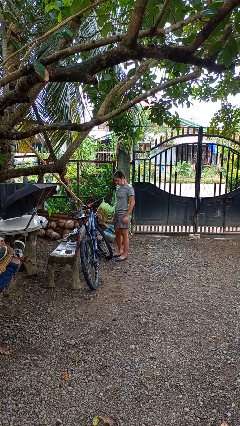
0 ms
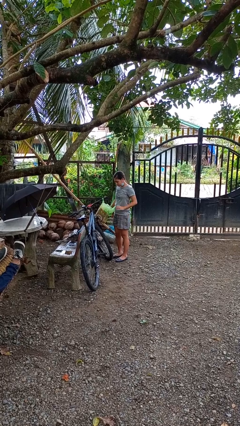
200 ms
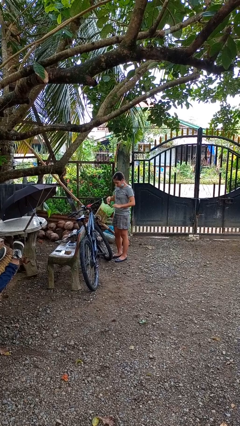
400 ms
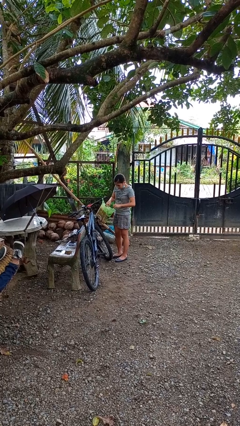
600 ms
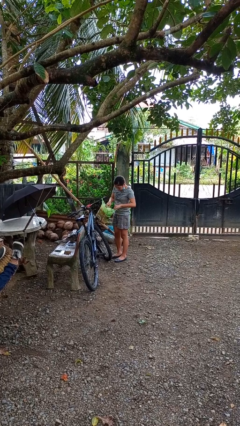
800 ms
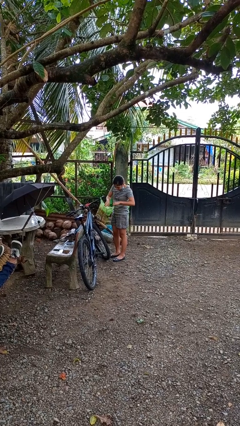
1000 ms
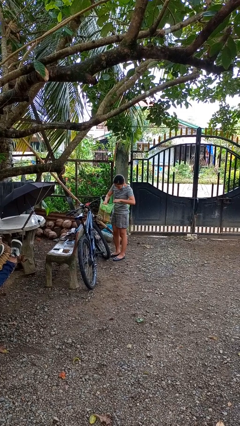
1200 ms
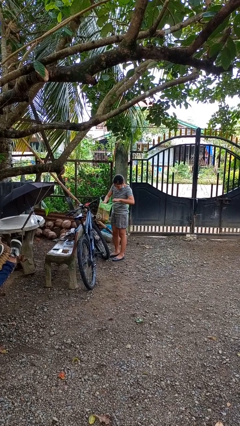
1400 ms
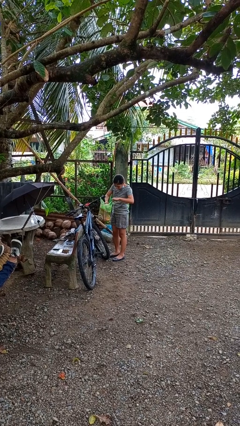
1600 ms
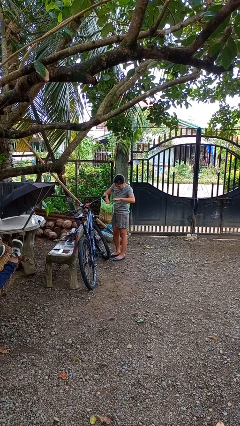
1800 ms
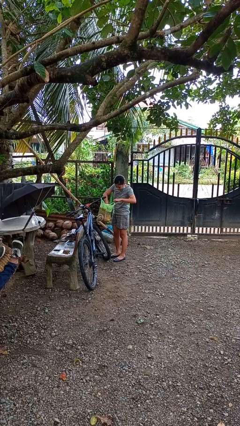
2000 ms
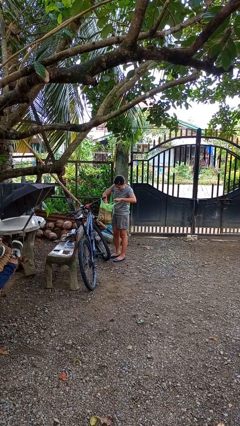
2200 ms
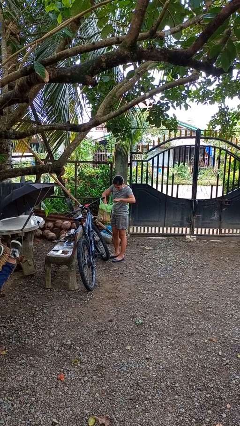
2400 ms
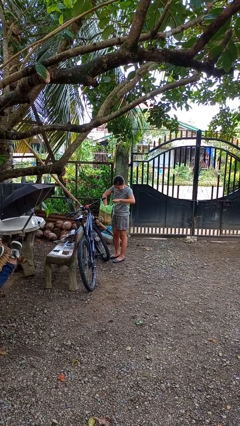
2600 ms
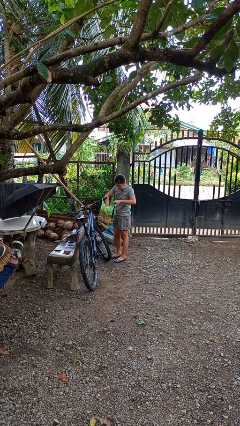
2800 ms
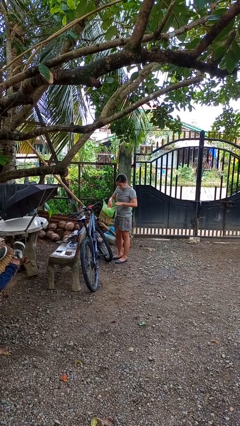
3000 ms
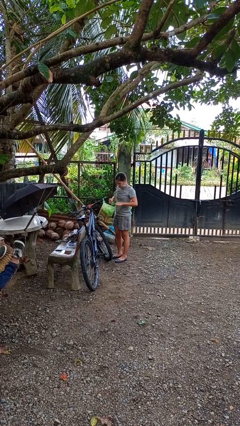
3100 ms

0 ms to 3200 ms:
person searches in bag

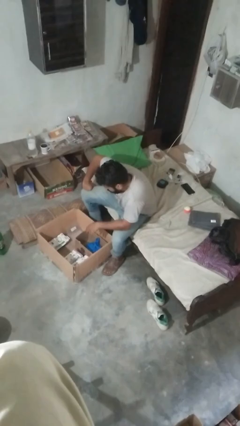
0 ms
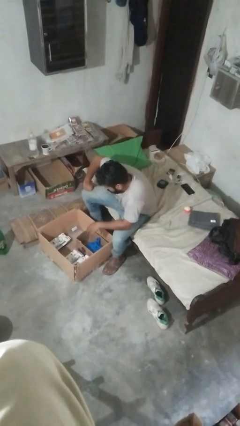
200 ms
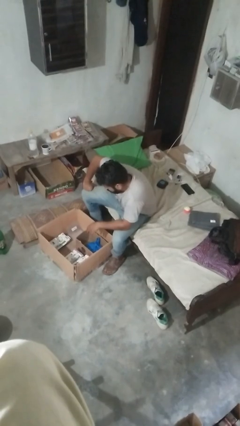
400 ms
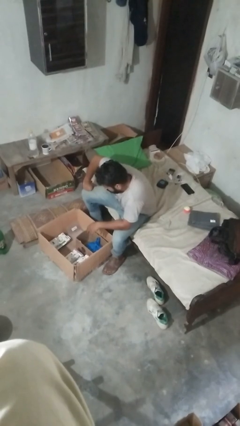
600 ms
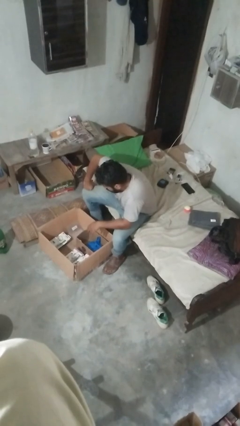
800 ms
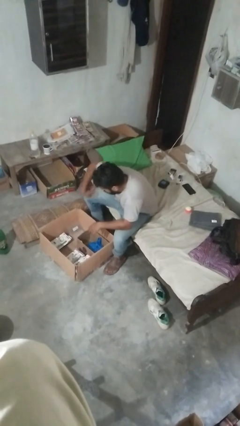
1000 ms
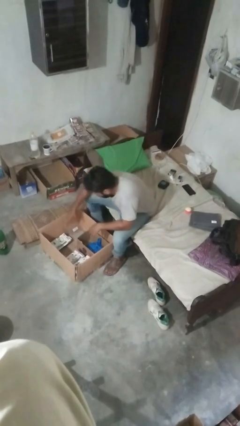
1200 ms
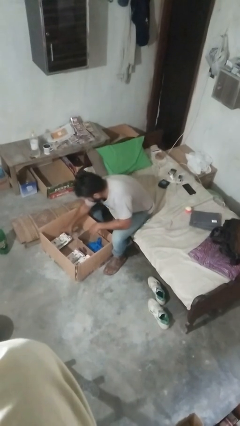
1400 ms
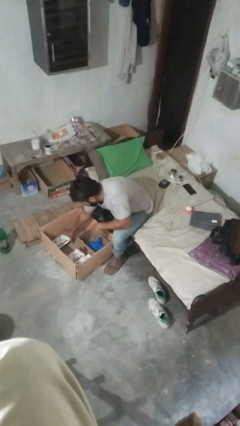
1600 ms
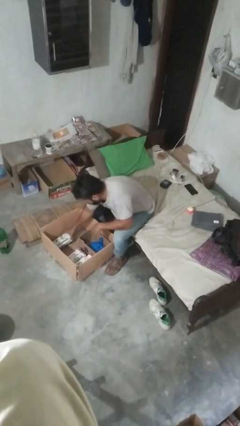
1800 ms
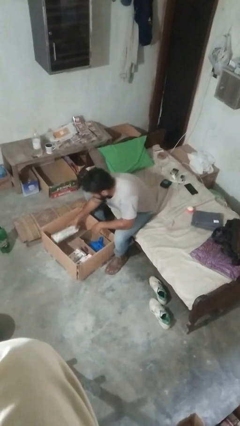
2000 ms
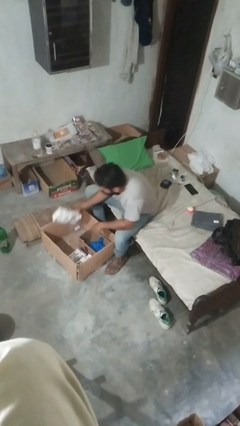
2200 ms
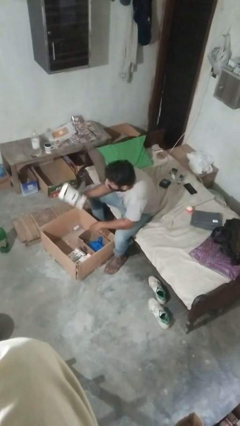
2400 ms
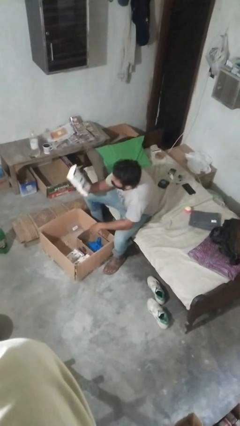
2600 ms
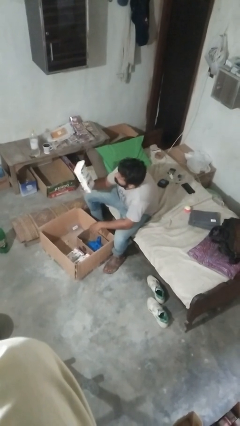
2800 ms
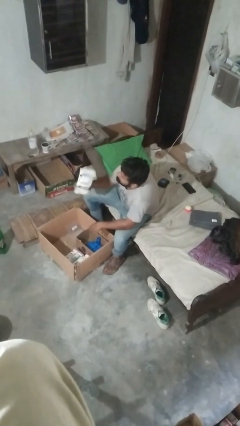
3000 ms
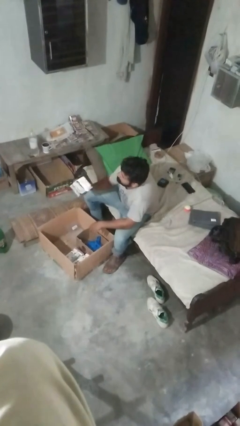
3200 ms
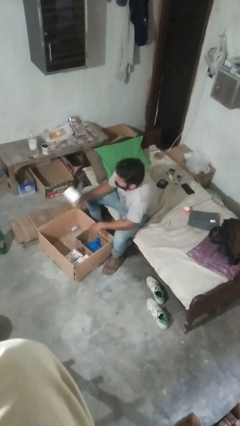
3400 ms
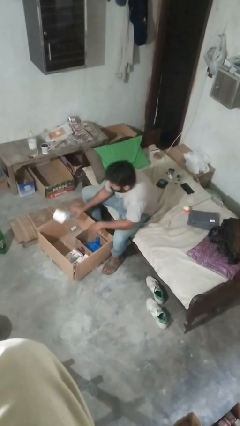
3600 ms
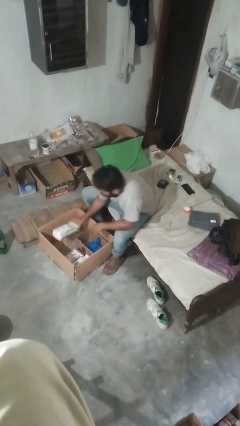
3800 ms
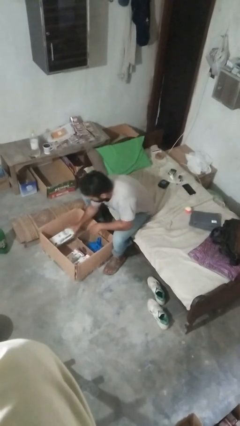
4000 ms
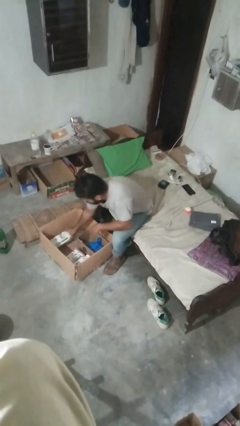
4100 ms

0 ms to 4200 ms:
person searches in box

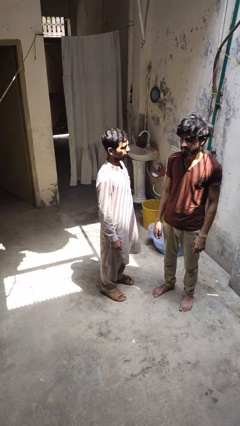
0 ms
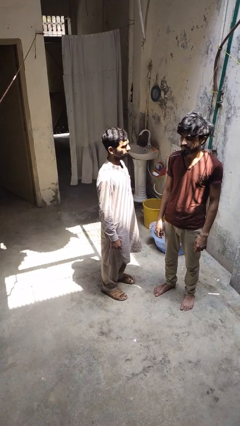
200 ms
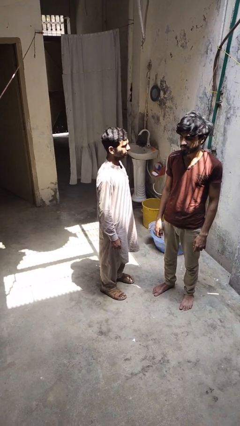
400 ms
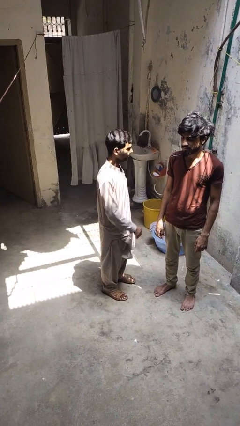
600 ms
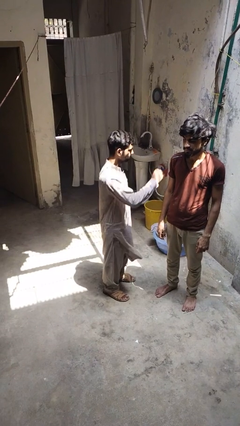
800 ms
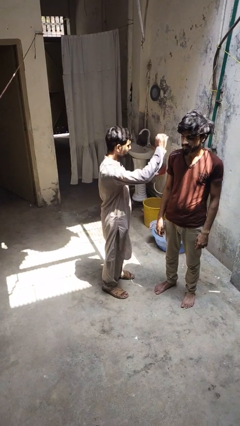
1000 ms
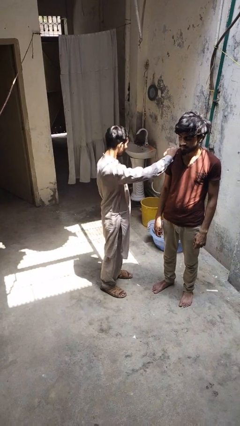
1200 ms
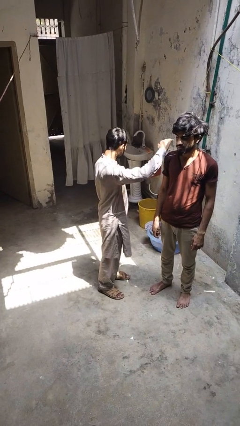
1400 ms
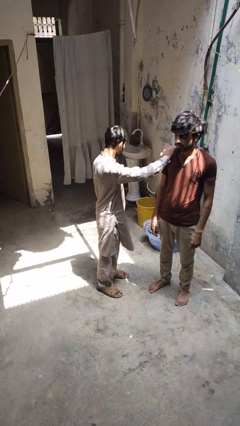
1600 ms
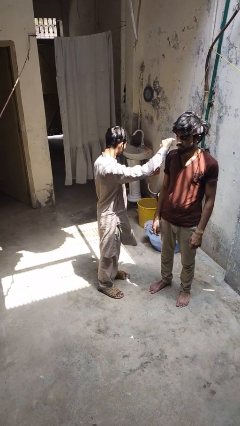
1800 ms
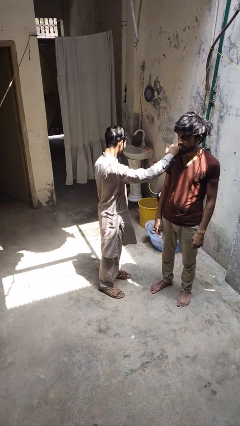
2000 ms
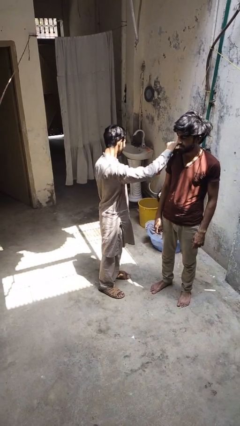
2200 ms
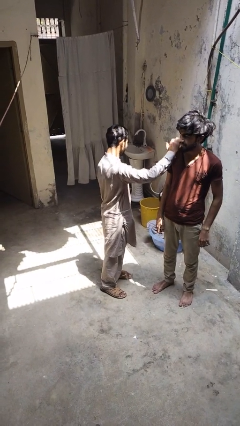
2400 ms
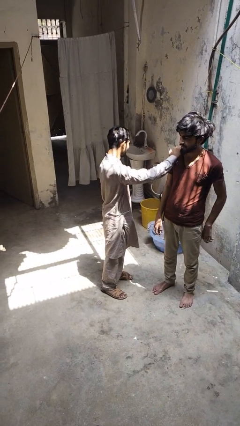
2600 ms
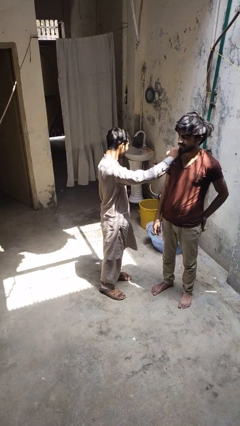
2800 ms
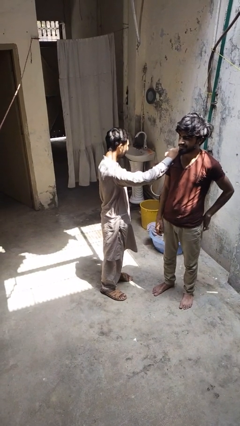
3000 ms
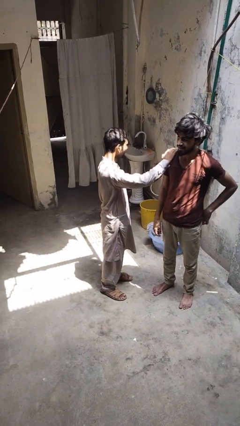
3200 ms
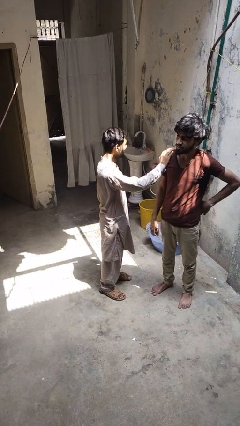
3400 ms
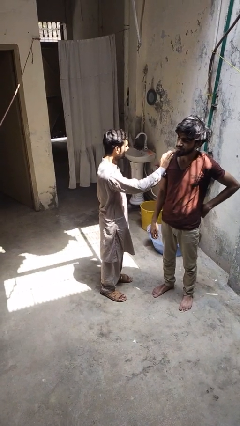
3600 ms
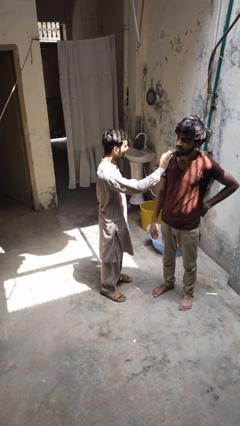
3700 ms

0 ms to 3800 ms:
person pounds shoulders of person

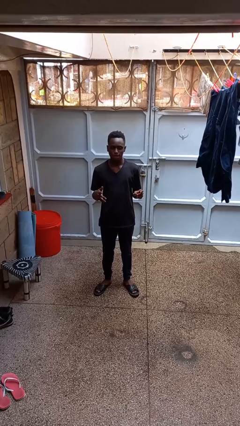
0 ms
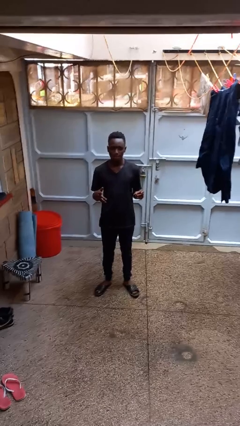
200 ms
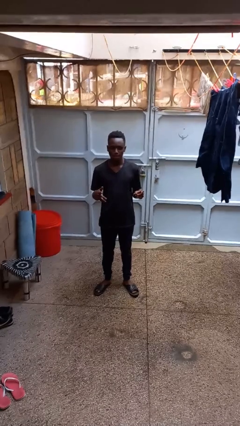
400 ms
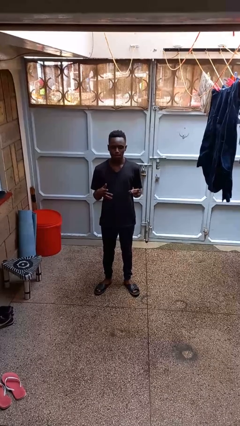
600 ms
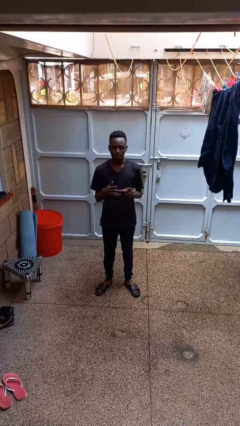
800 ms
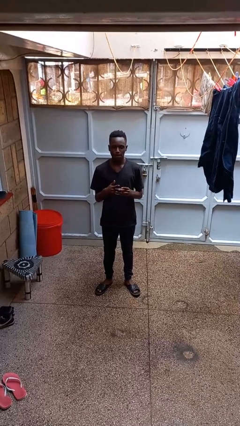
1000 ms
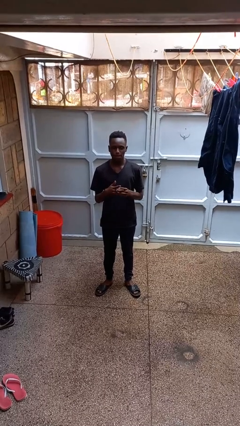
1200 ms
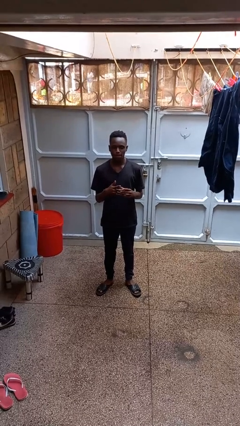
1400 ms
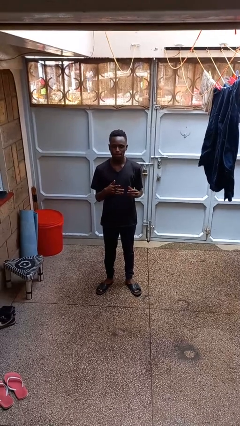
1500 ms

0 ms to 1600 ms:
person puts on ring

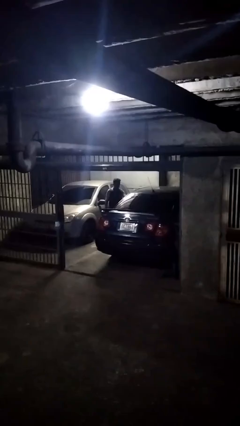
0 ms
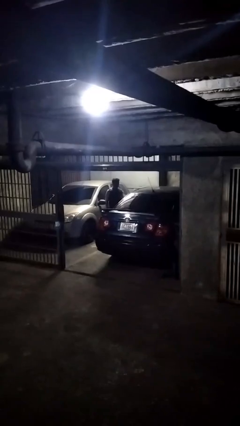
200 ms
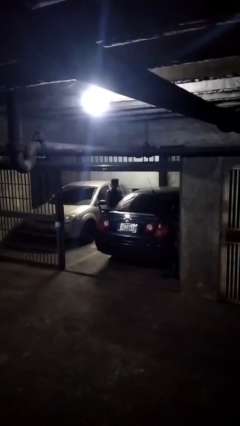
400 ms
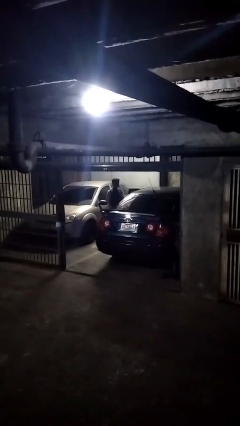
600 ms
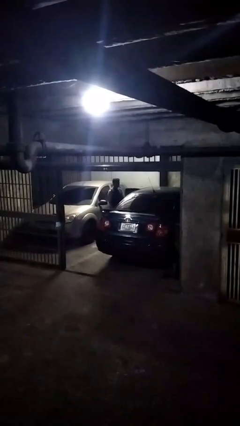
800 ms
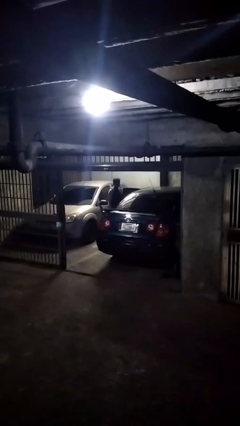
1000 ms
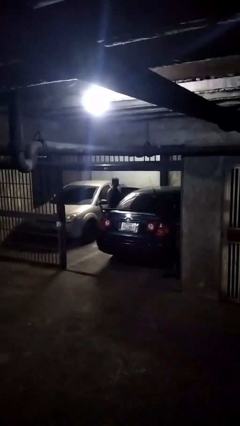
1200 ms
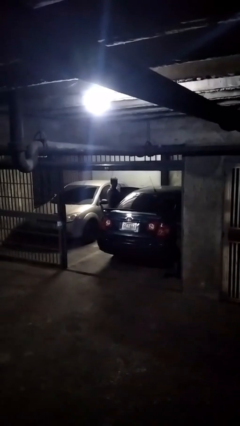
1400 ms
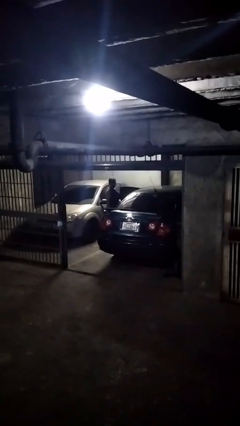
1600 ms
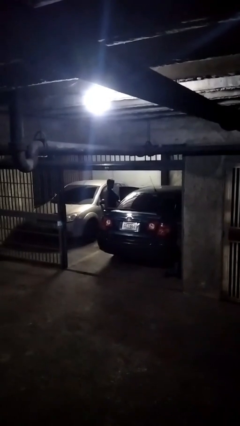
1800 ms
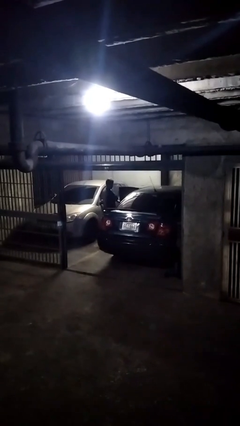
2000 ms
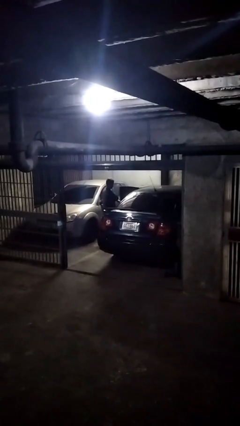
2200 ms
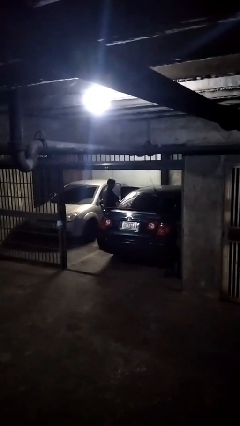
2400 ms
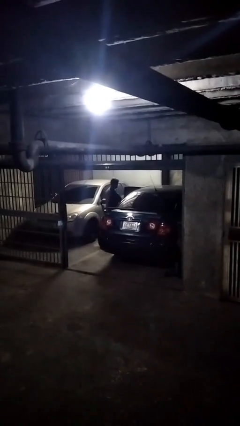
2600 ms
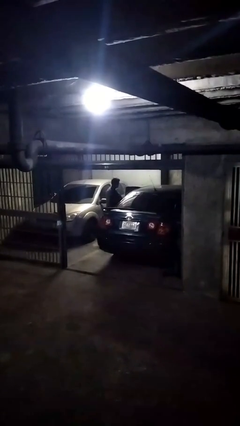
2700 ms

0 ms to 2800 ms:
person opens car door

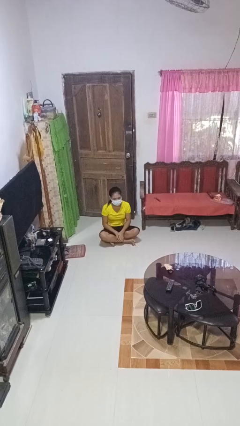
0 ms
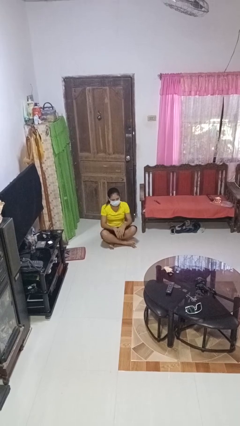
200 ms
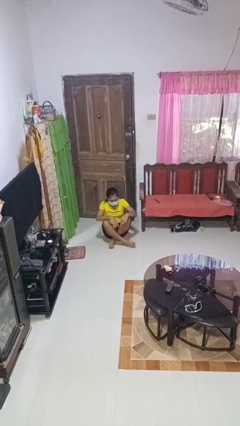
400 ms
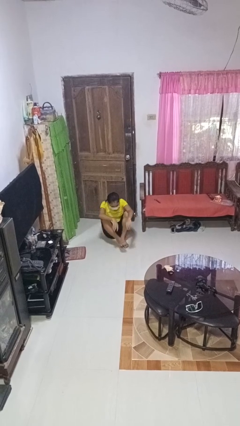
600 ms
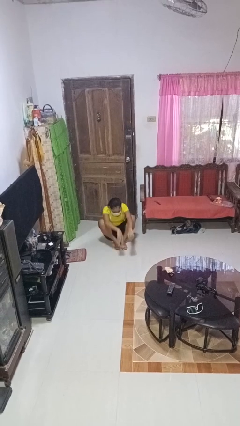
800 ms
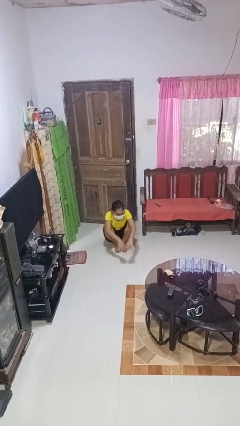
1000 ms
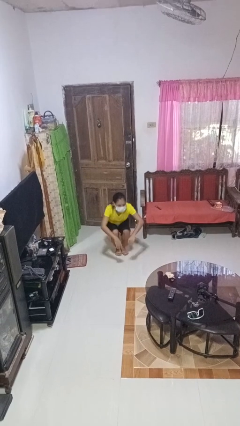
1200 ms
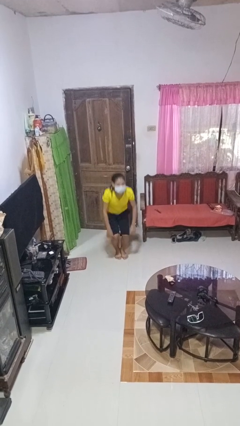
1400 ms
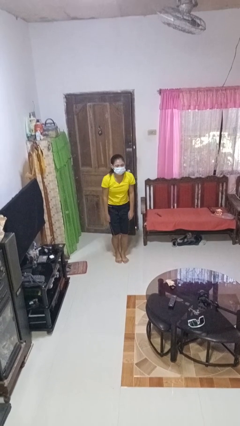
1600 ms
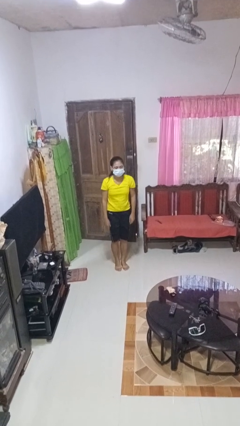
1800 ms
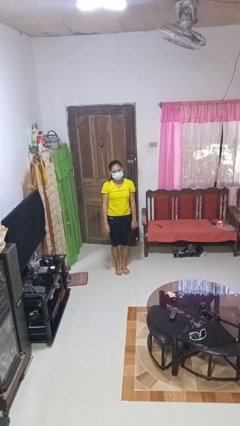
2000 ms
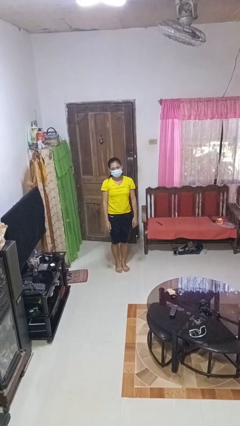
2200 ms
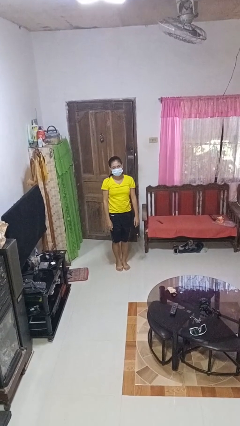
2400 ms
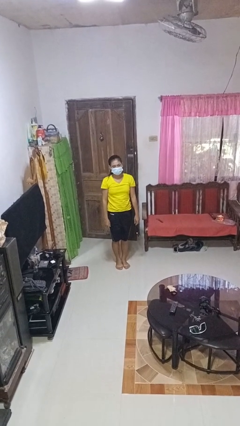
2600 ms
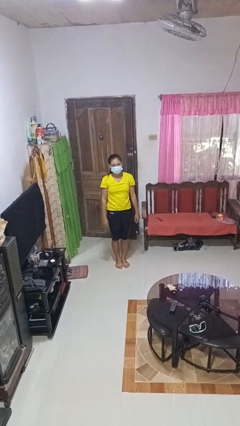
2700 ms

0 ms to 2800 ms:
person stands up from floor
